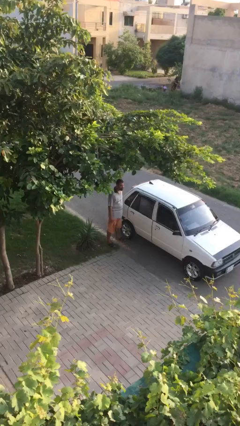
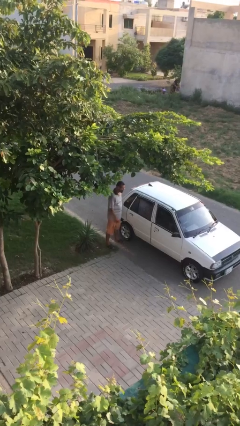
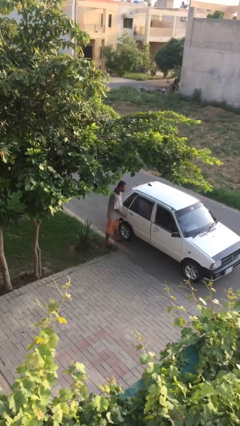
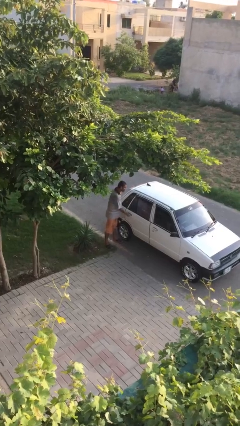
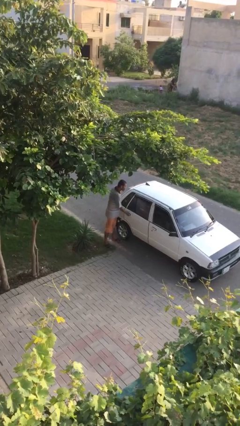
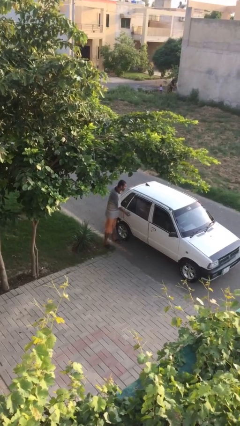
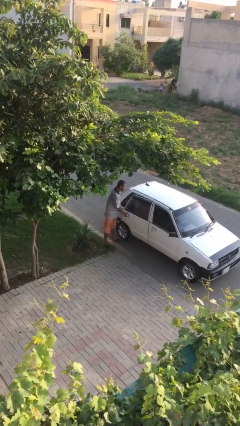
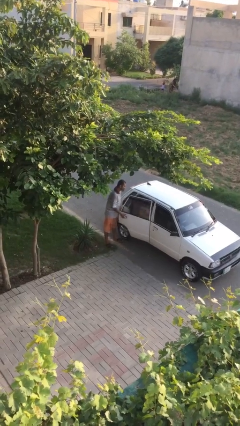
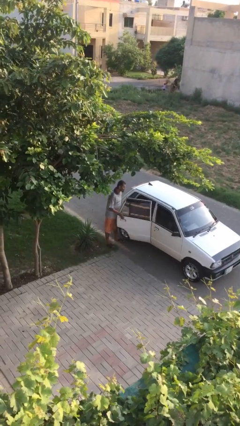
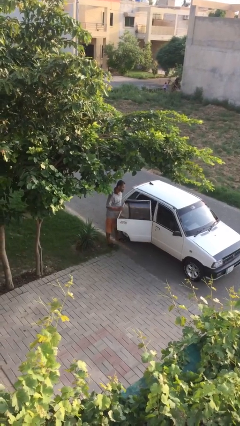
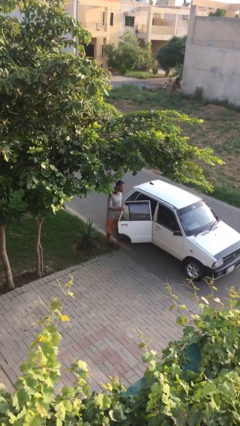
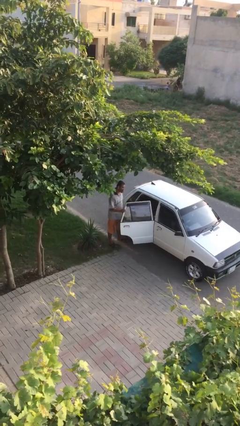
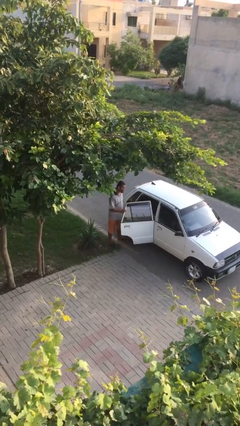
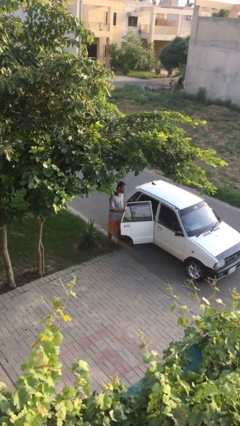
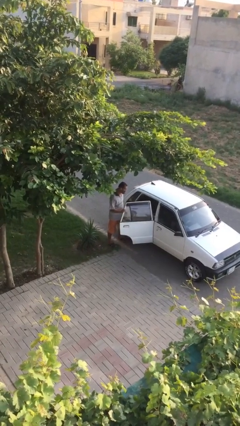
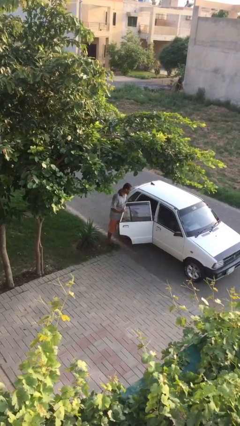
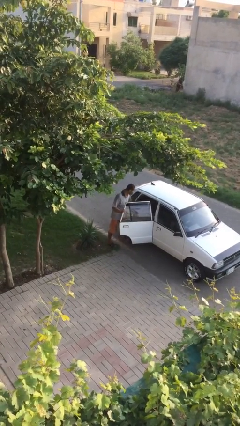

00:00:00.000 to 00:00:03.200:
person opens car door

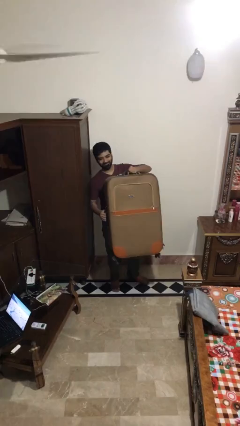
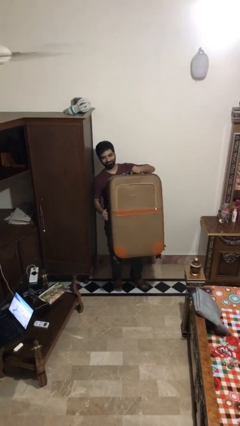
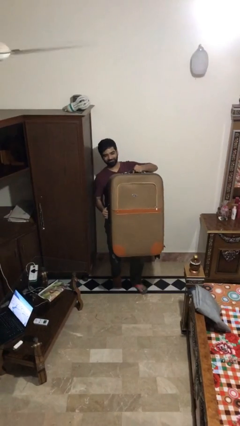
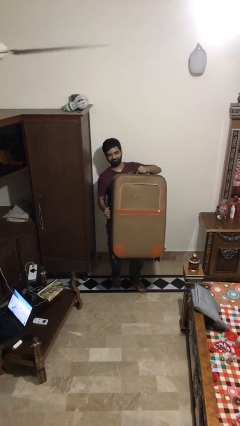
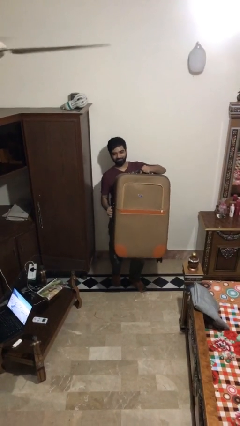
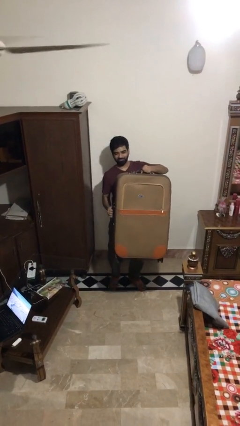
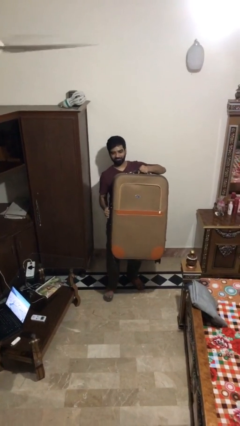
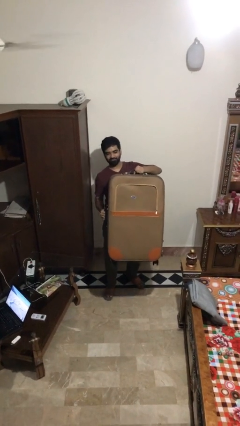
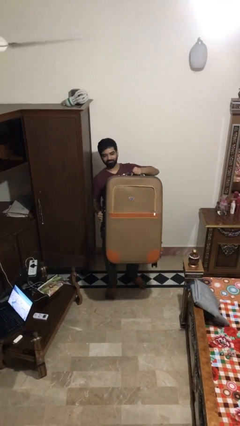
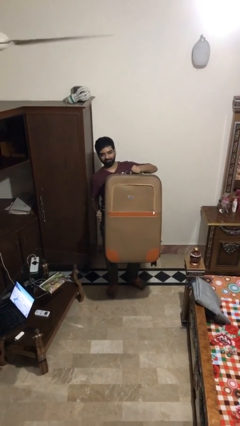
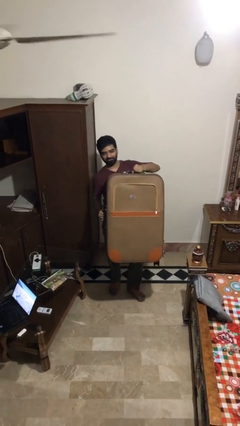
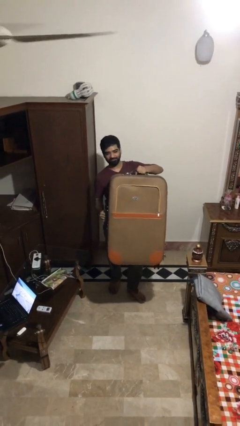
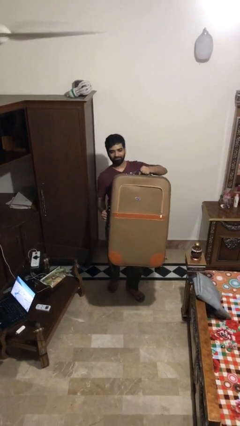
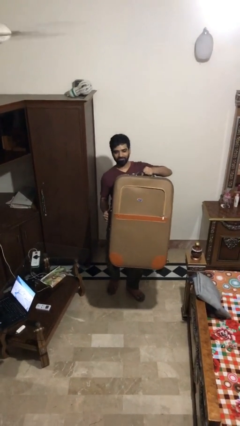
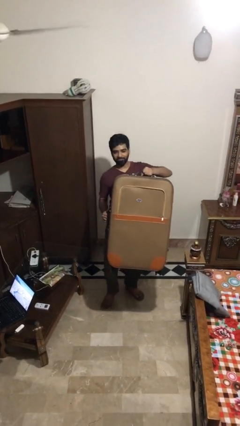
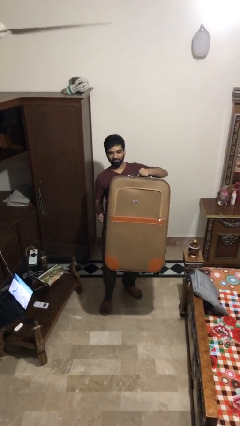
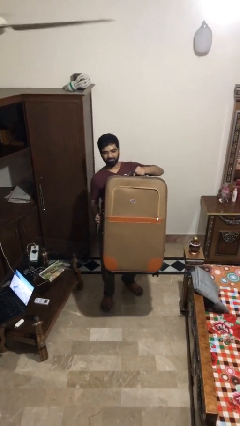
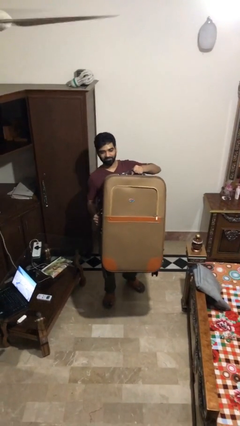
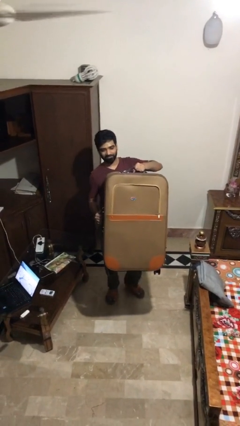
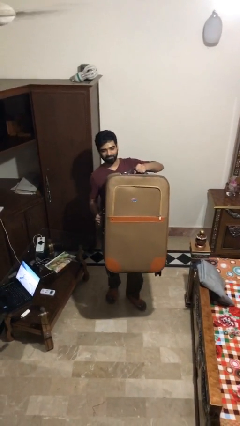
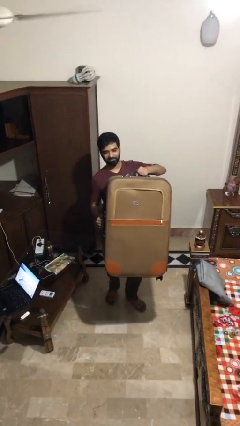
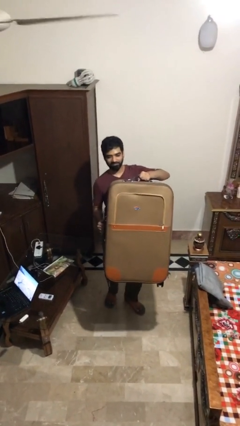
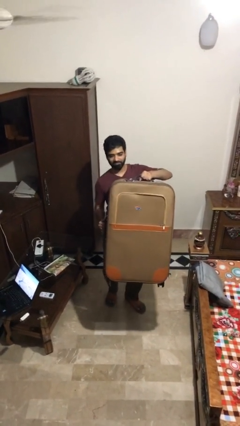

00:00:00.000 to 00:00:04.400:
person carries heavy object

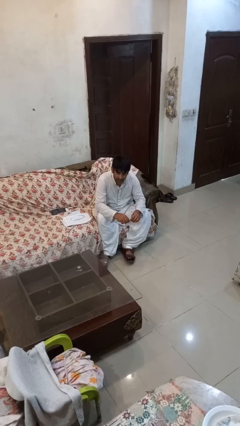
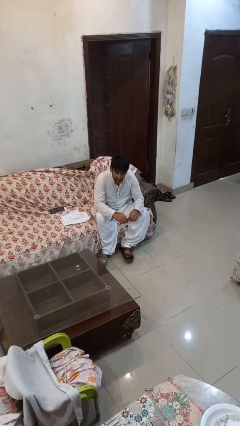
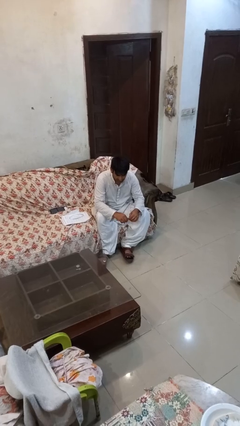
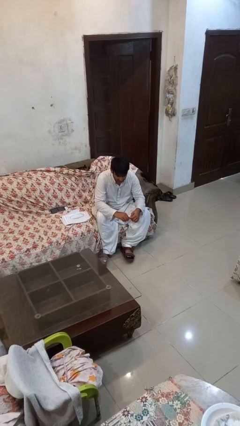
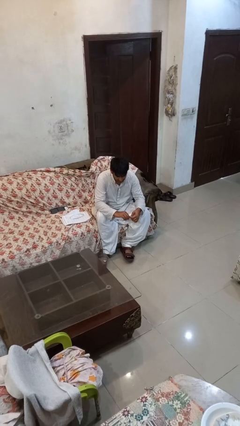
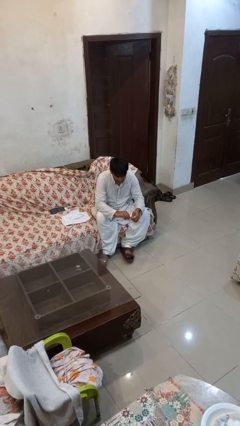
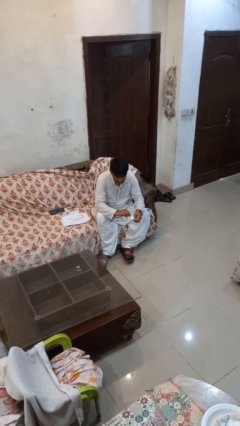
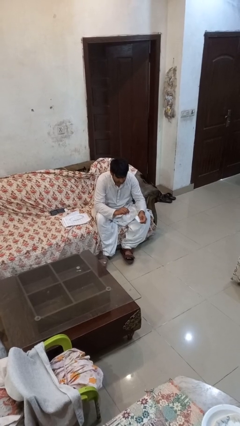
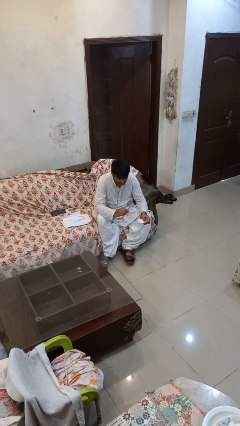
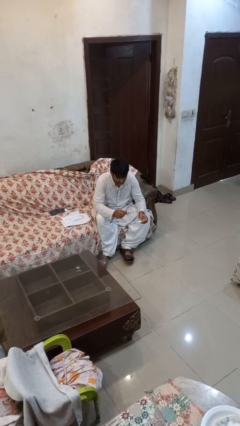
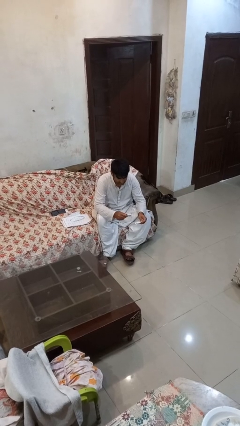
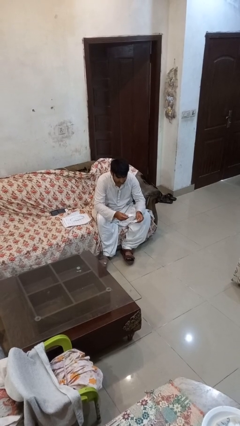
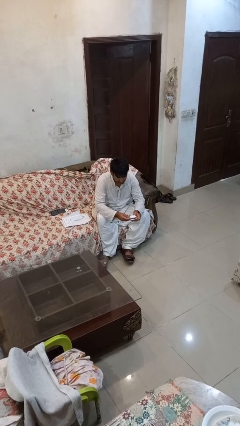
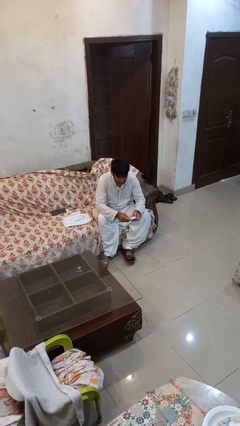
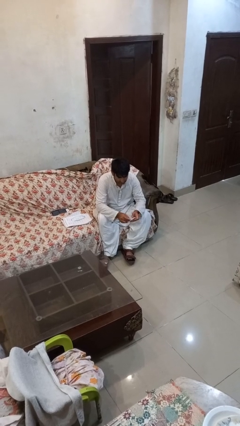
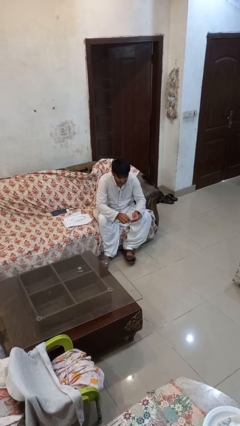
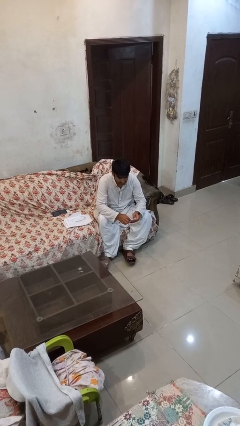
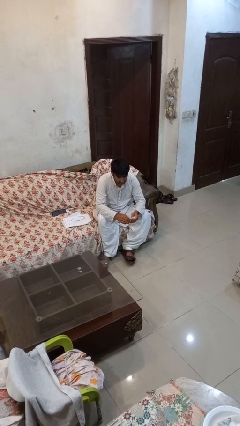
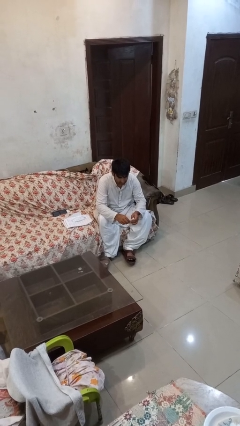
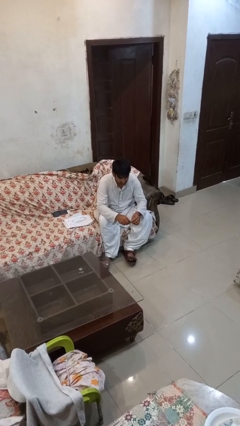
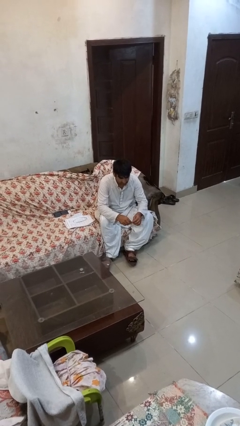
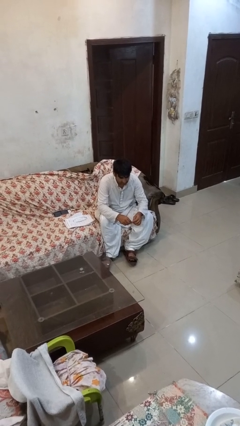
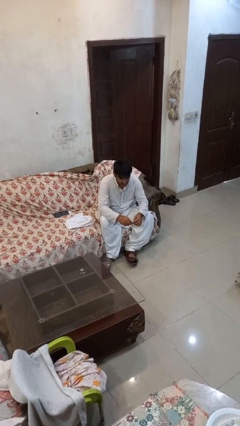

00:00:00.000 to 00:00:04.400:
person tears paper

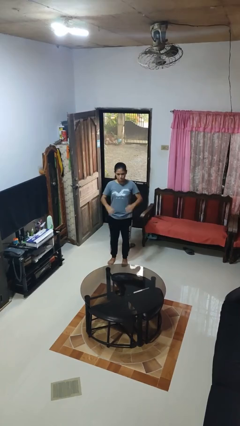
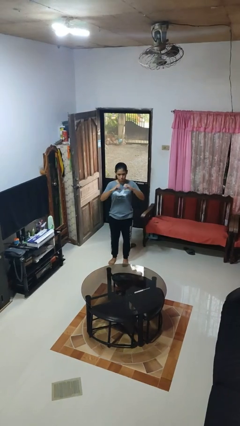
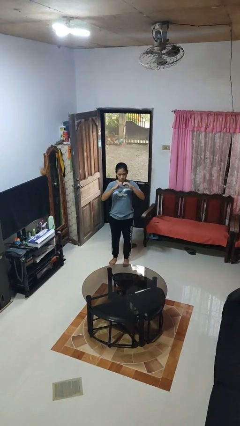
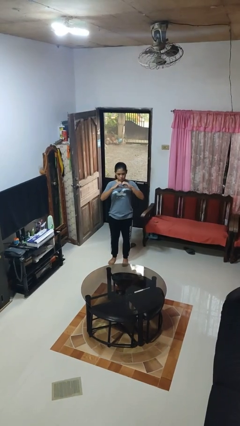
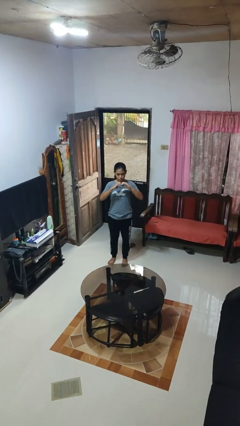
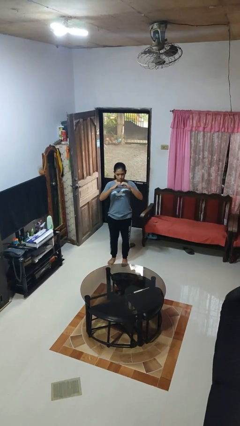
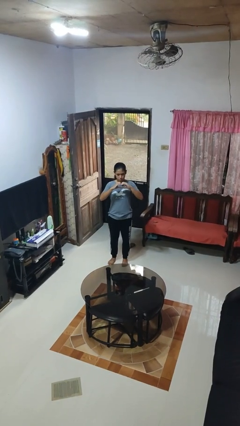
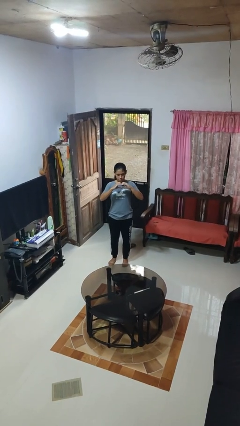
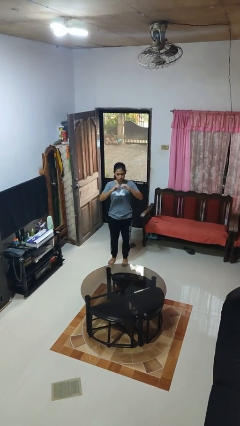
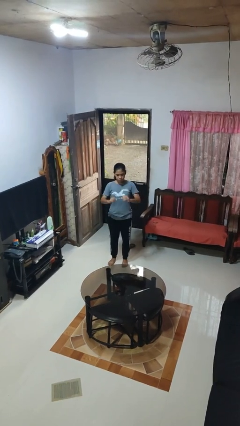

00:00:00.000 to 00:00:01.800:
person gestures heart

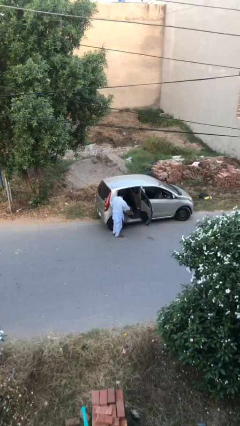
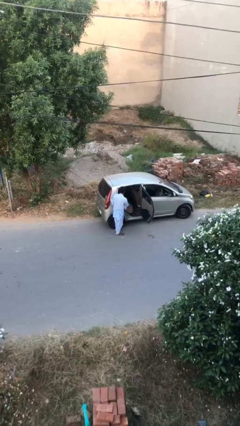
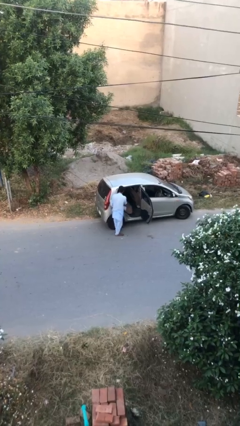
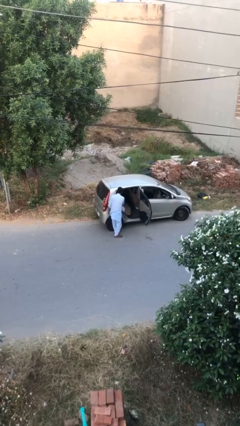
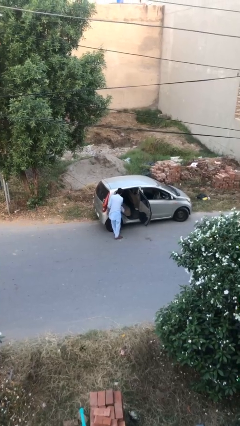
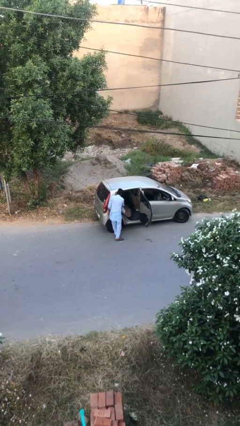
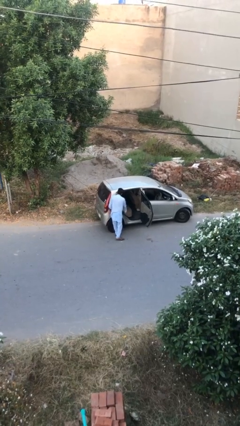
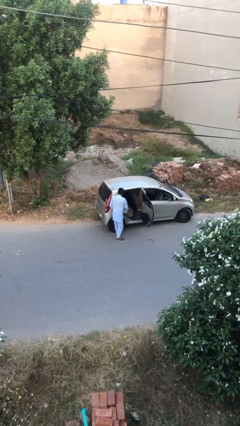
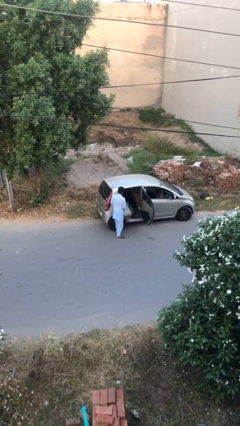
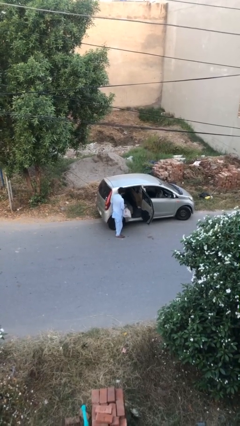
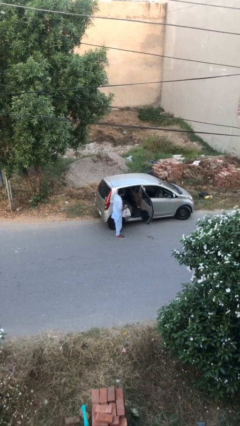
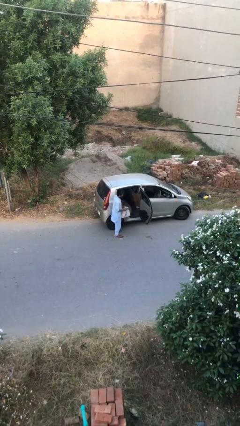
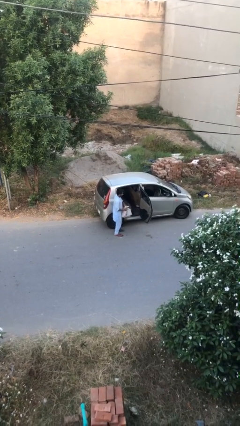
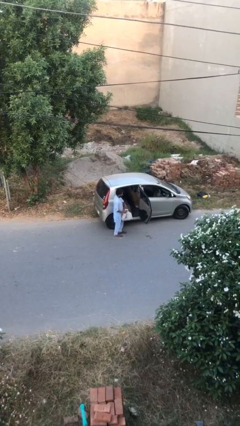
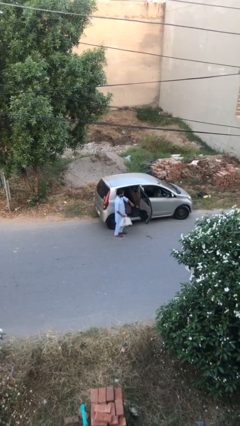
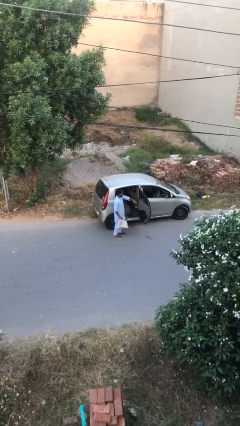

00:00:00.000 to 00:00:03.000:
person unloads car

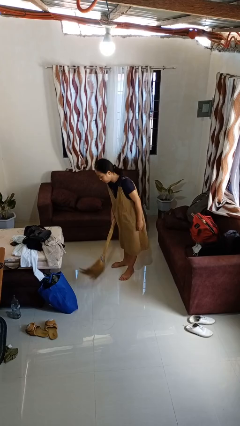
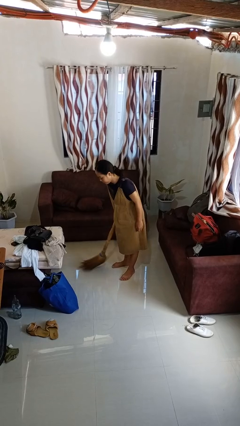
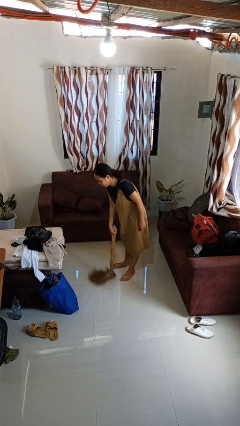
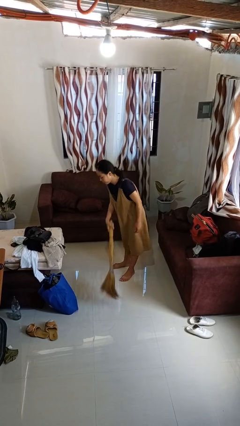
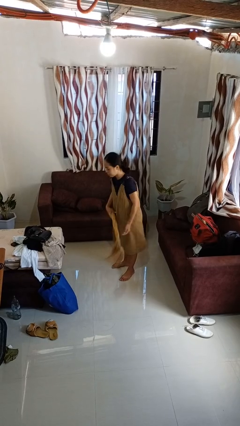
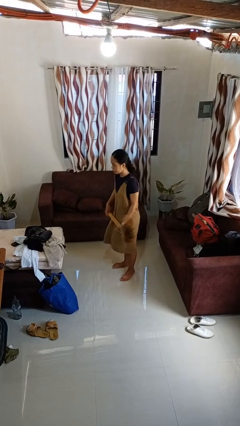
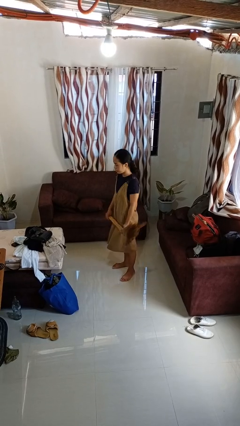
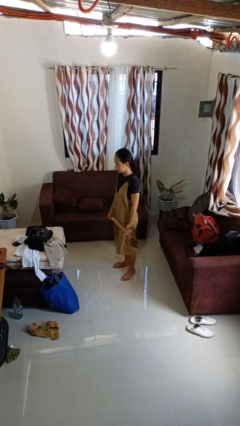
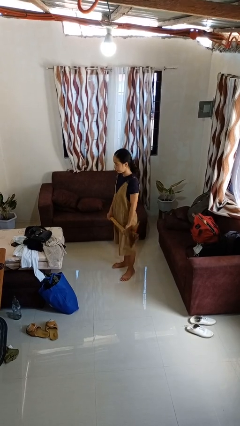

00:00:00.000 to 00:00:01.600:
person sweeps floor
